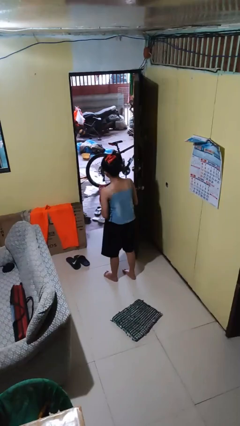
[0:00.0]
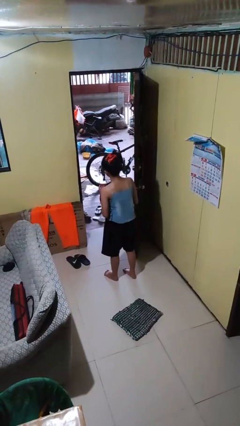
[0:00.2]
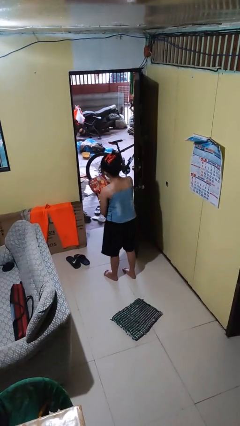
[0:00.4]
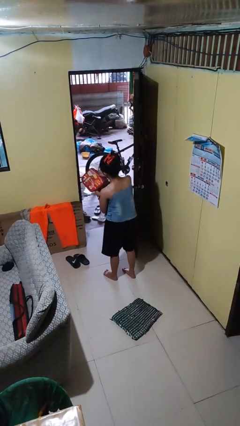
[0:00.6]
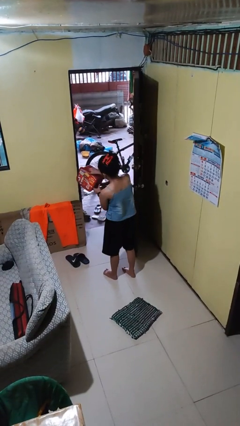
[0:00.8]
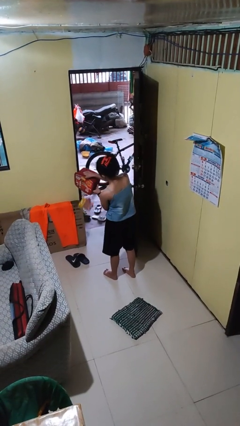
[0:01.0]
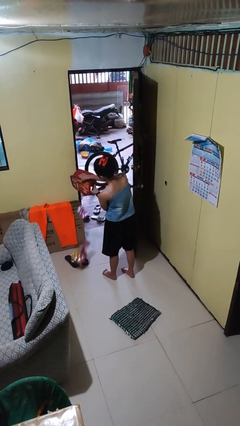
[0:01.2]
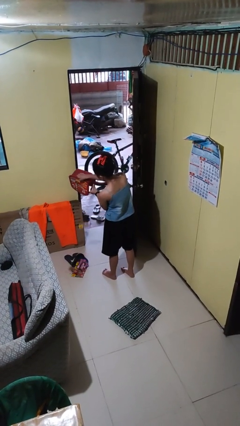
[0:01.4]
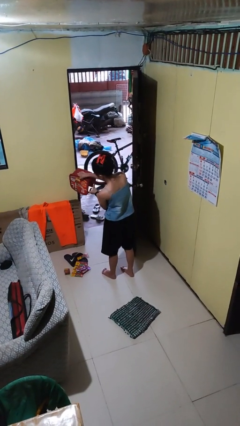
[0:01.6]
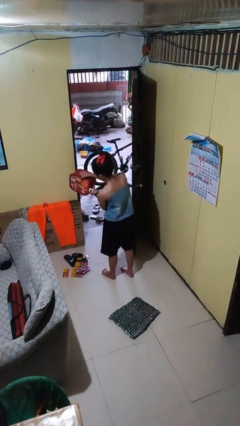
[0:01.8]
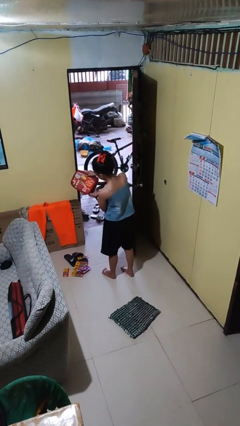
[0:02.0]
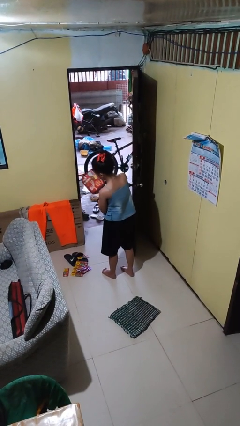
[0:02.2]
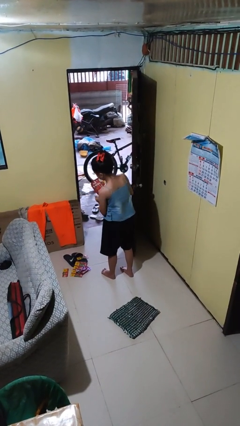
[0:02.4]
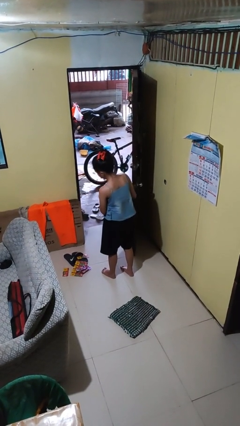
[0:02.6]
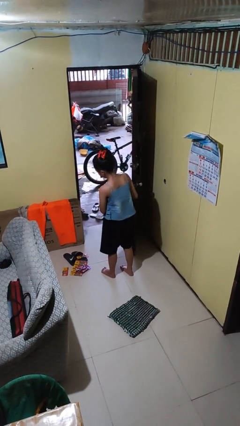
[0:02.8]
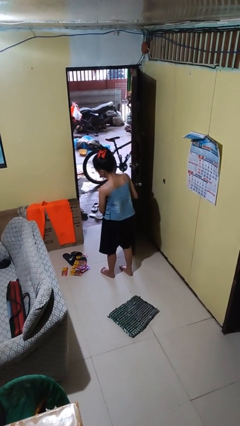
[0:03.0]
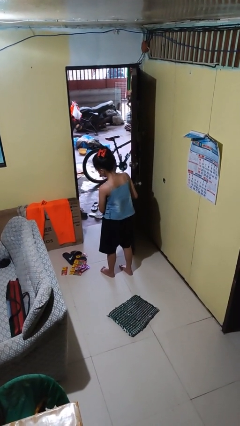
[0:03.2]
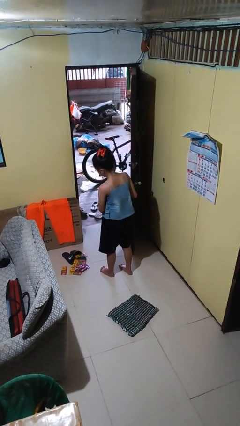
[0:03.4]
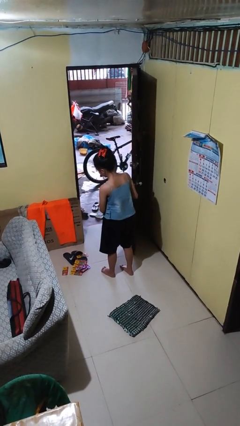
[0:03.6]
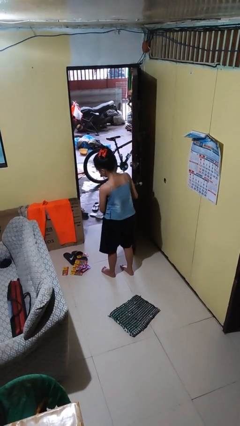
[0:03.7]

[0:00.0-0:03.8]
person unloads box onto floor

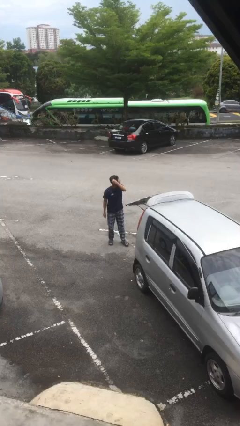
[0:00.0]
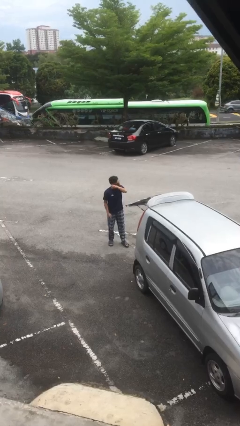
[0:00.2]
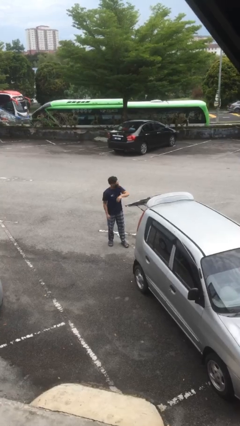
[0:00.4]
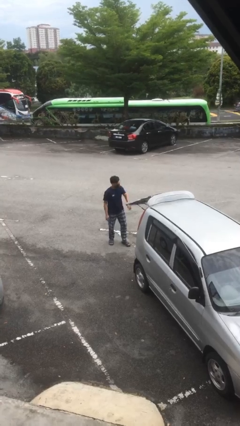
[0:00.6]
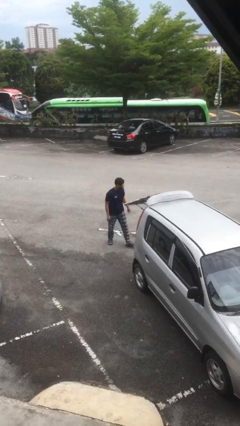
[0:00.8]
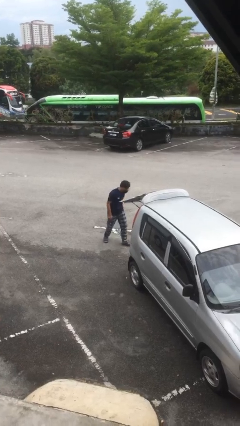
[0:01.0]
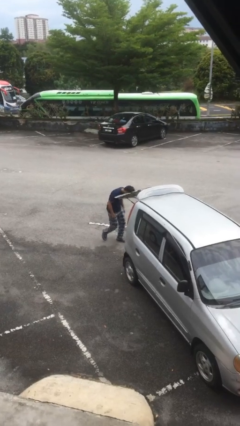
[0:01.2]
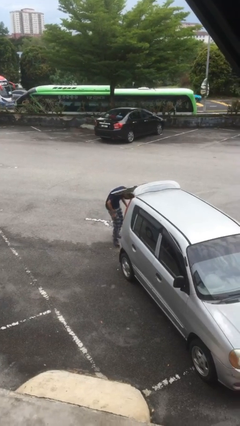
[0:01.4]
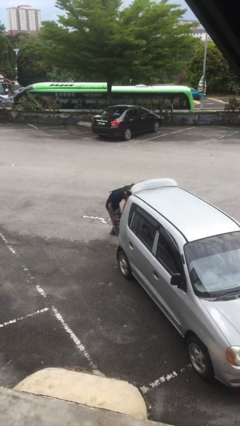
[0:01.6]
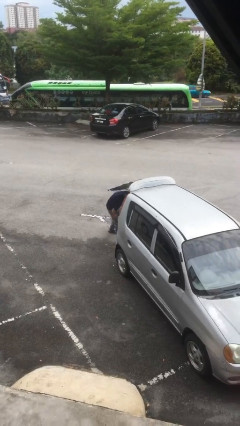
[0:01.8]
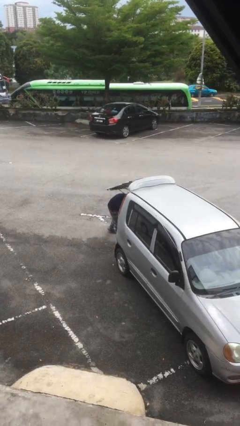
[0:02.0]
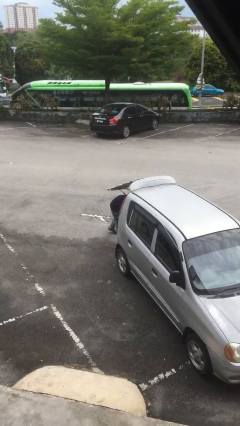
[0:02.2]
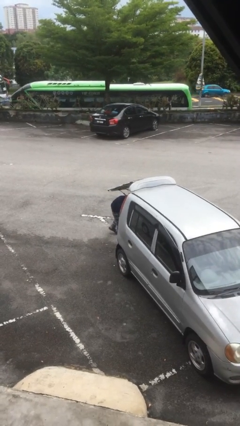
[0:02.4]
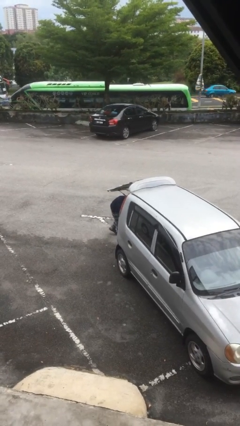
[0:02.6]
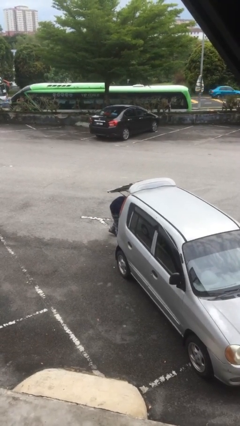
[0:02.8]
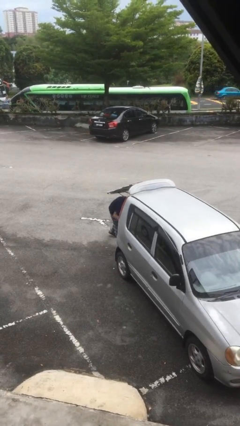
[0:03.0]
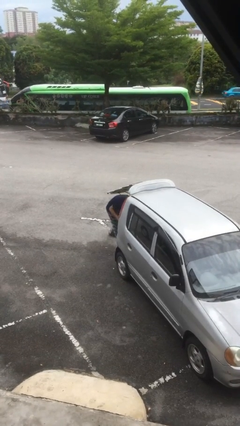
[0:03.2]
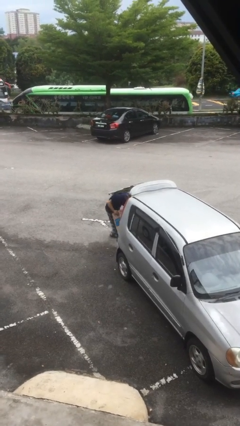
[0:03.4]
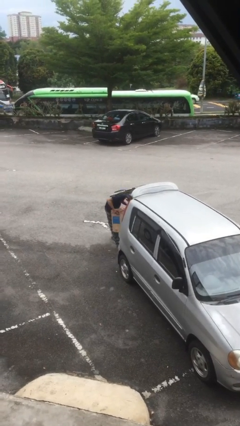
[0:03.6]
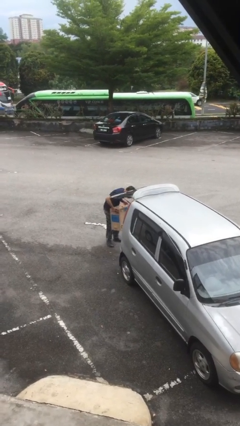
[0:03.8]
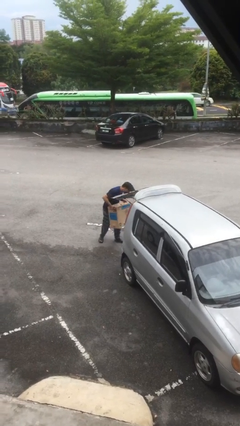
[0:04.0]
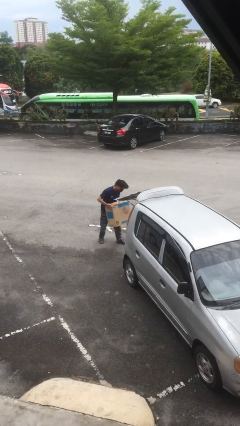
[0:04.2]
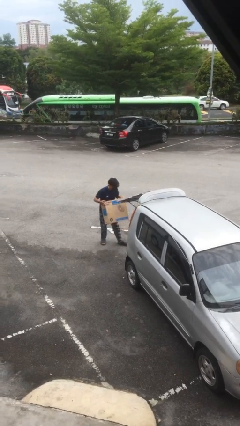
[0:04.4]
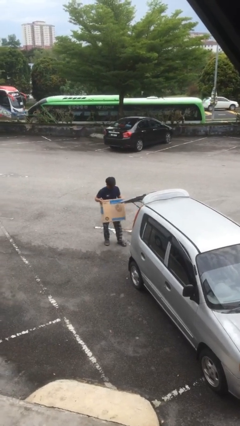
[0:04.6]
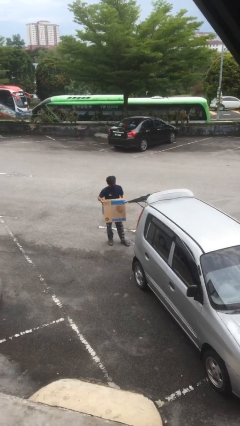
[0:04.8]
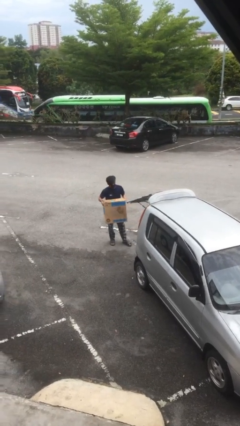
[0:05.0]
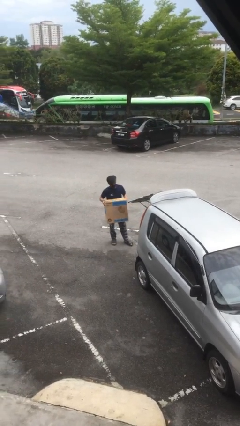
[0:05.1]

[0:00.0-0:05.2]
person unloads car

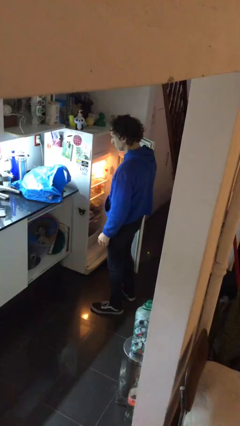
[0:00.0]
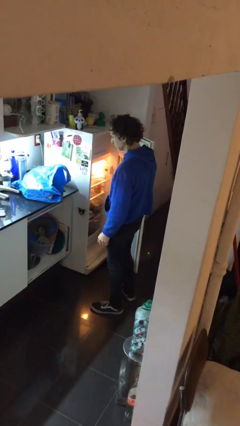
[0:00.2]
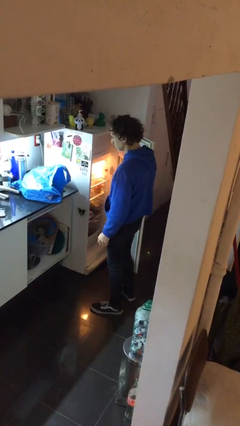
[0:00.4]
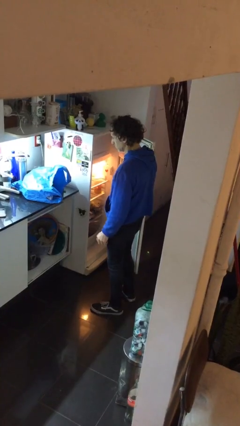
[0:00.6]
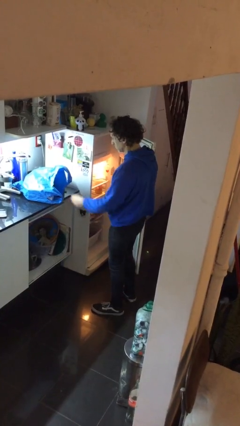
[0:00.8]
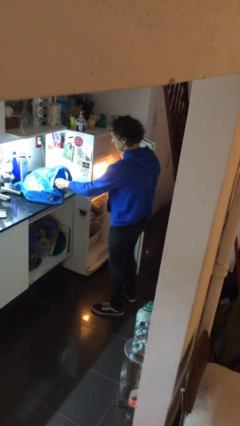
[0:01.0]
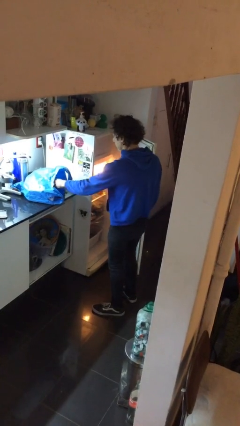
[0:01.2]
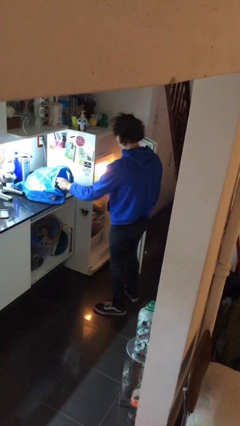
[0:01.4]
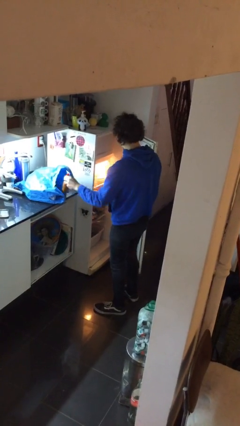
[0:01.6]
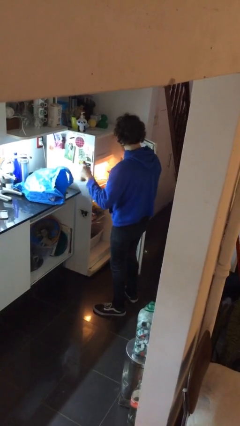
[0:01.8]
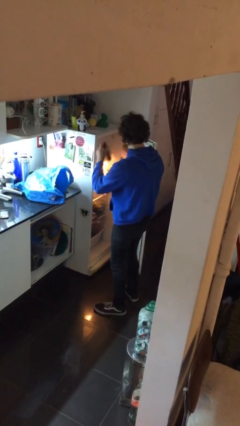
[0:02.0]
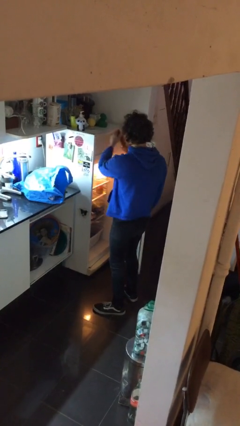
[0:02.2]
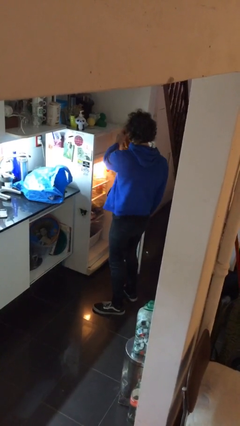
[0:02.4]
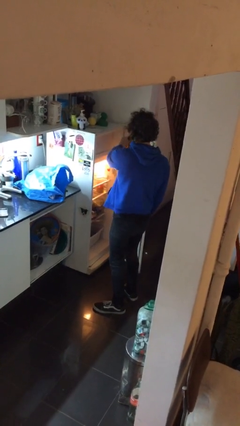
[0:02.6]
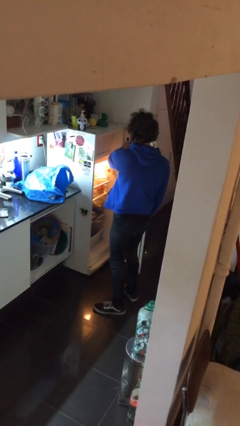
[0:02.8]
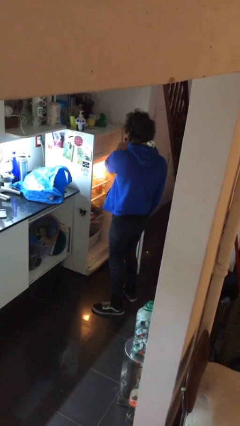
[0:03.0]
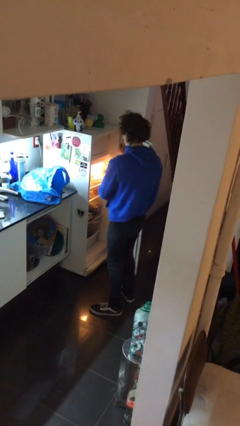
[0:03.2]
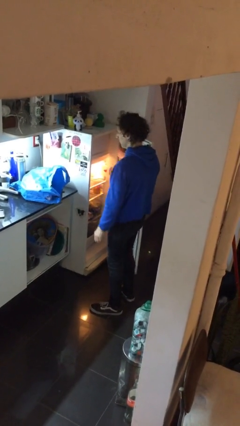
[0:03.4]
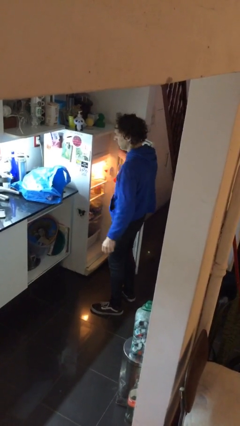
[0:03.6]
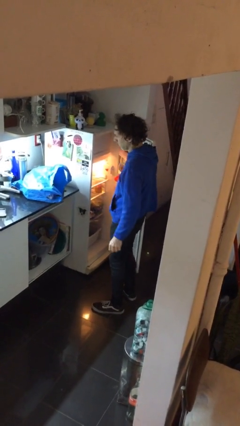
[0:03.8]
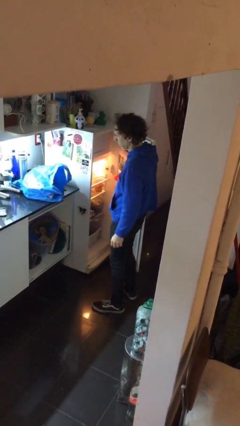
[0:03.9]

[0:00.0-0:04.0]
person loads groceries into refrigerator

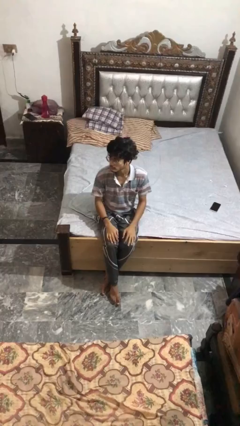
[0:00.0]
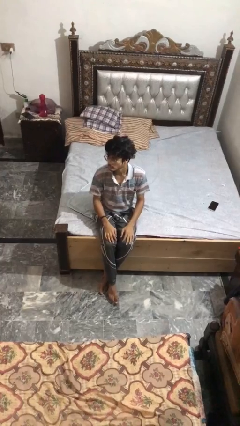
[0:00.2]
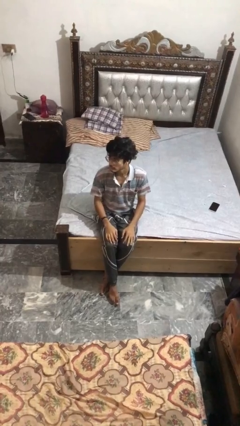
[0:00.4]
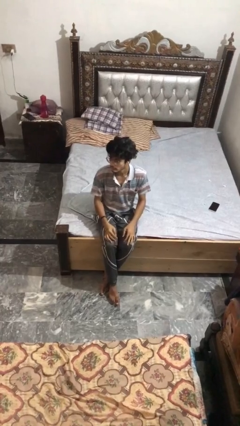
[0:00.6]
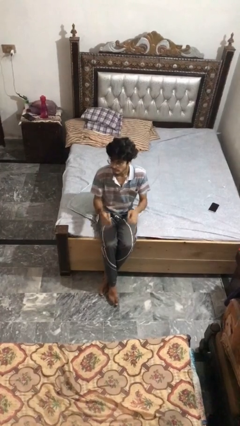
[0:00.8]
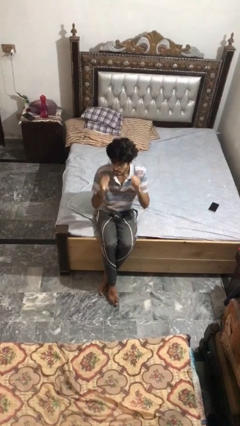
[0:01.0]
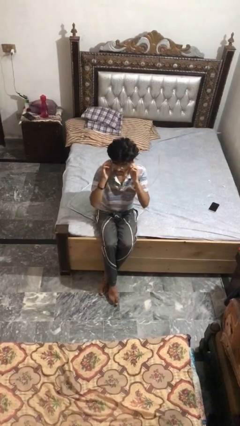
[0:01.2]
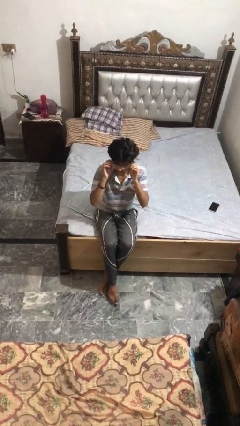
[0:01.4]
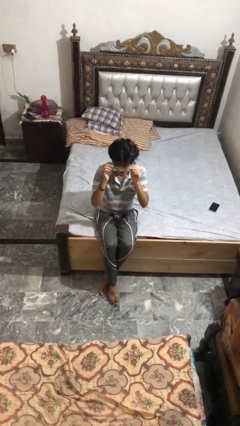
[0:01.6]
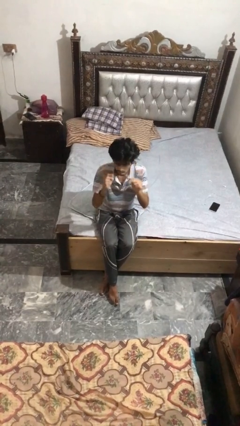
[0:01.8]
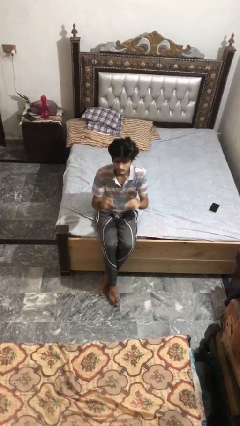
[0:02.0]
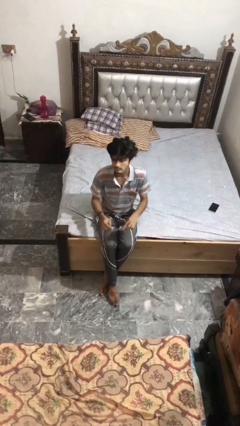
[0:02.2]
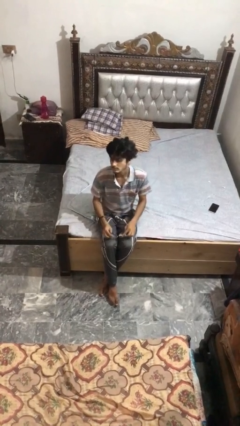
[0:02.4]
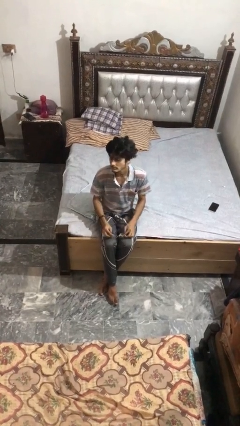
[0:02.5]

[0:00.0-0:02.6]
person takes off glasses

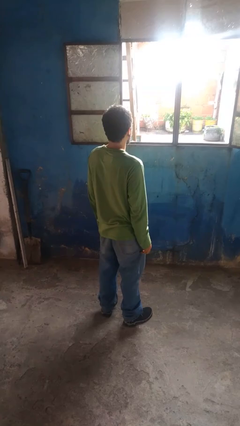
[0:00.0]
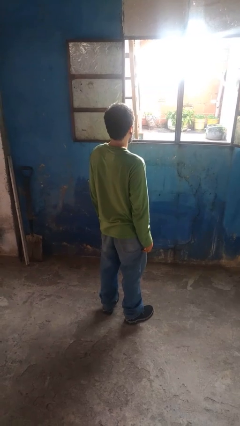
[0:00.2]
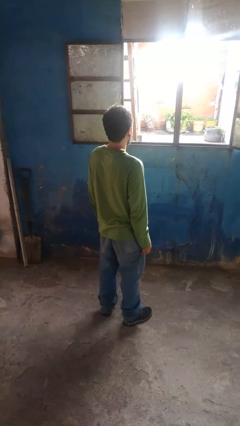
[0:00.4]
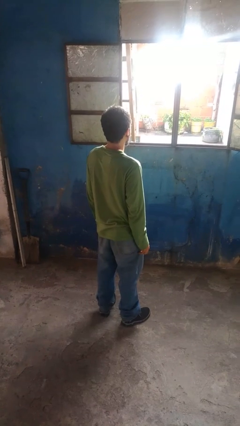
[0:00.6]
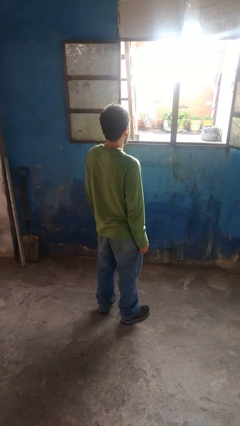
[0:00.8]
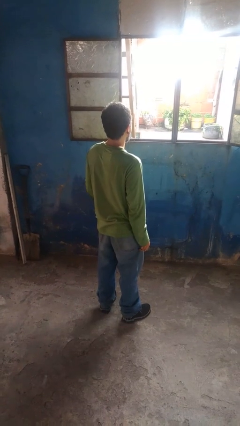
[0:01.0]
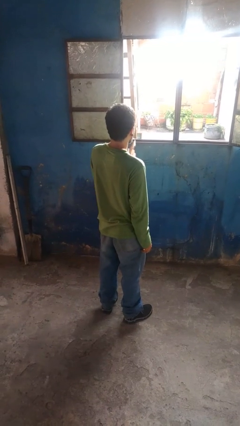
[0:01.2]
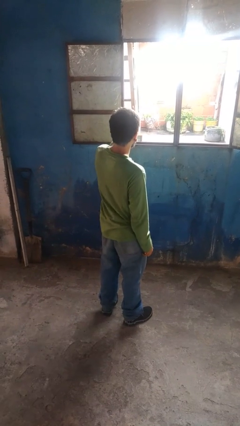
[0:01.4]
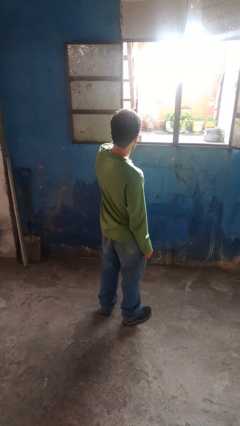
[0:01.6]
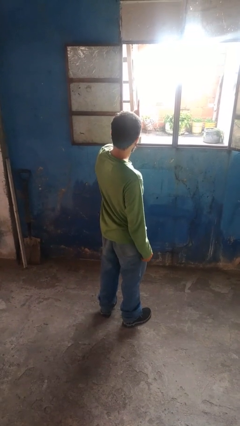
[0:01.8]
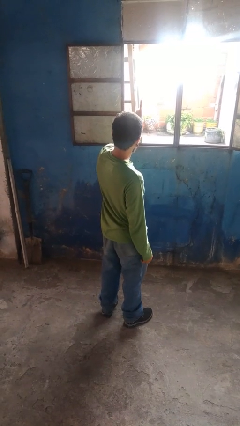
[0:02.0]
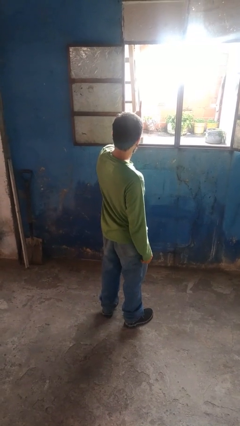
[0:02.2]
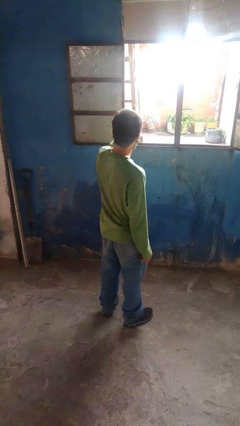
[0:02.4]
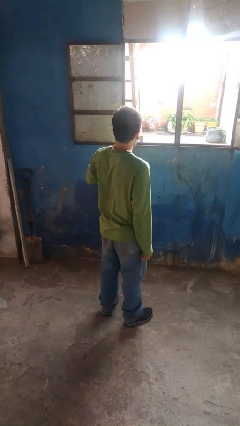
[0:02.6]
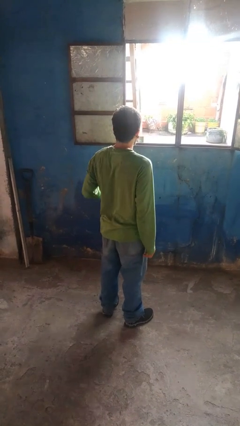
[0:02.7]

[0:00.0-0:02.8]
person gestures number one
